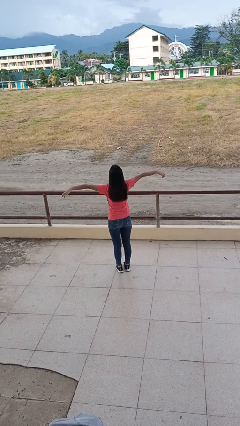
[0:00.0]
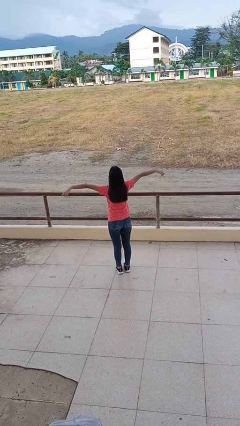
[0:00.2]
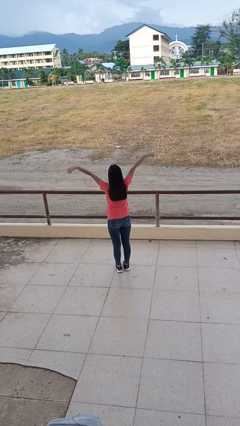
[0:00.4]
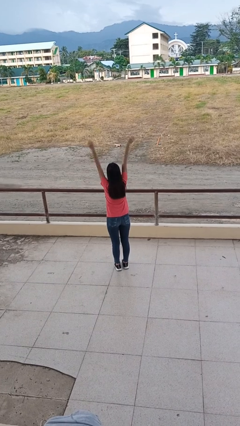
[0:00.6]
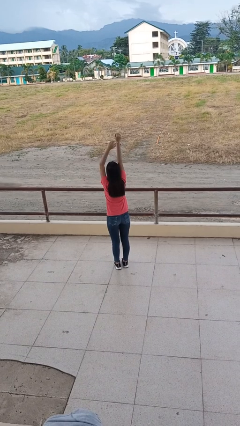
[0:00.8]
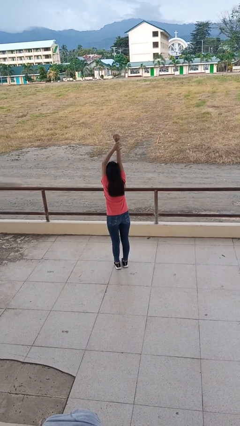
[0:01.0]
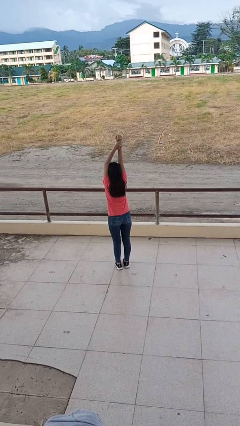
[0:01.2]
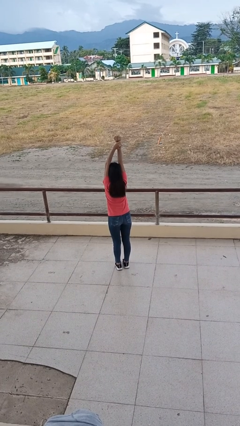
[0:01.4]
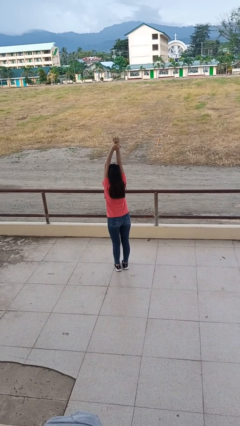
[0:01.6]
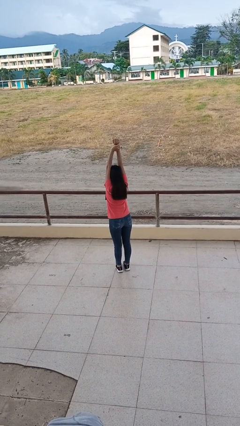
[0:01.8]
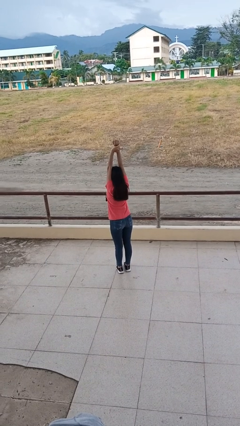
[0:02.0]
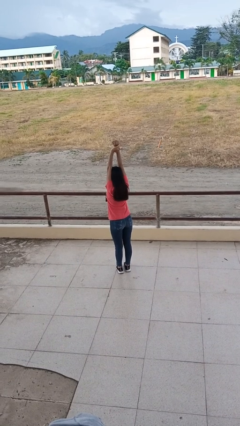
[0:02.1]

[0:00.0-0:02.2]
person stretches arms over head

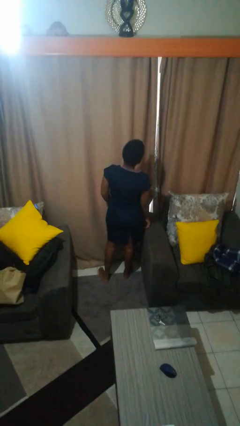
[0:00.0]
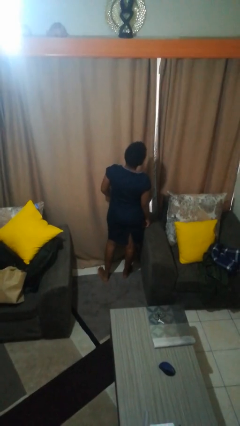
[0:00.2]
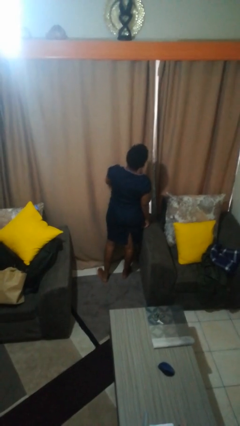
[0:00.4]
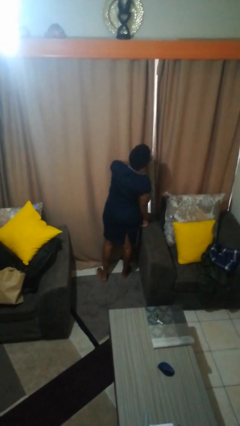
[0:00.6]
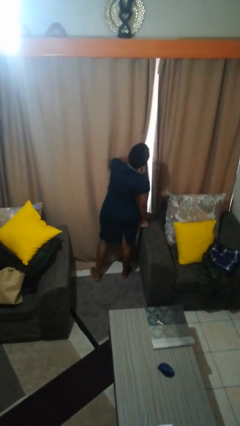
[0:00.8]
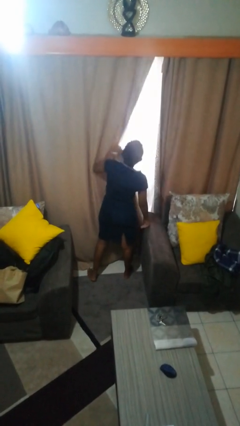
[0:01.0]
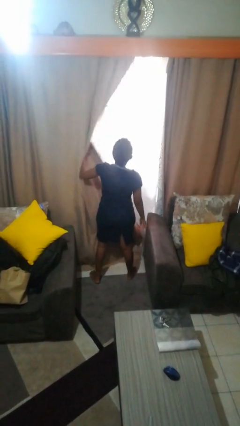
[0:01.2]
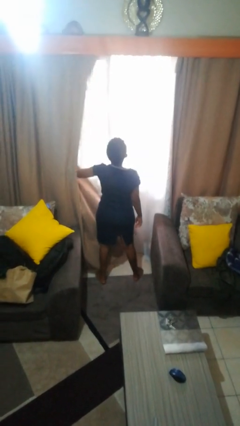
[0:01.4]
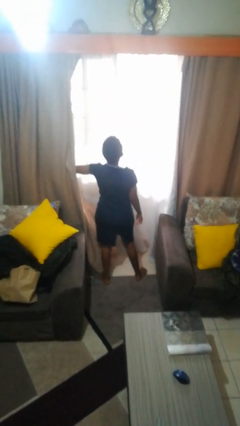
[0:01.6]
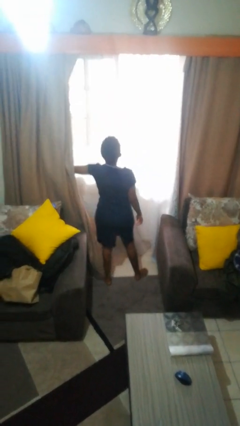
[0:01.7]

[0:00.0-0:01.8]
person opens curtains

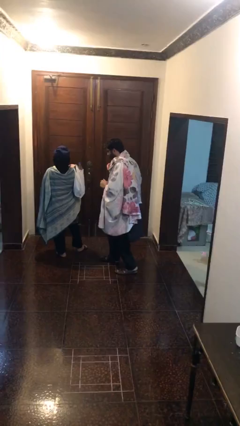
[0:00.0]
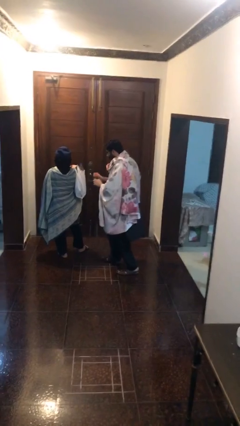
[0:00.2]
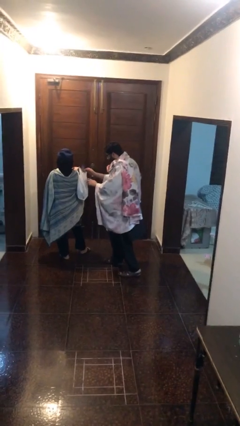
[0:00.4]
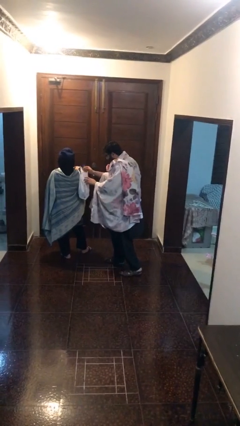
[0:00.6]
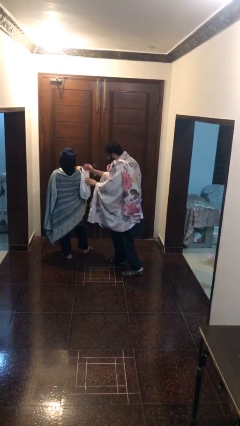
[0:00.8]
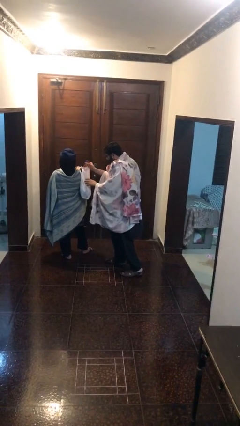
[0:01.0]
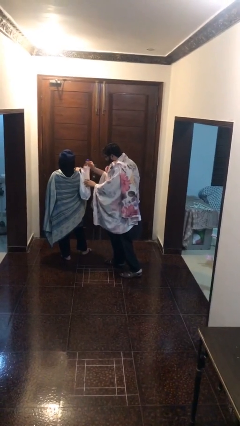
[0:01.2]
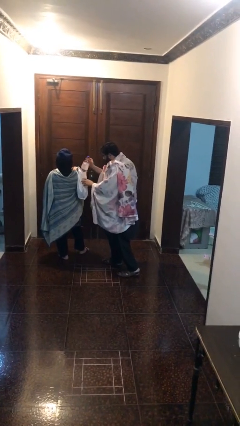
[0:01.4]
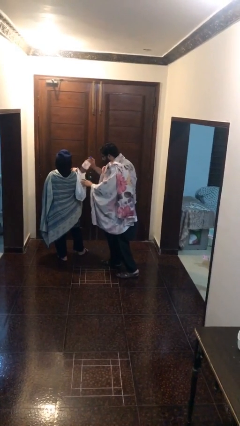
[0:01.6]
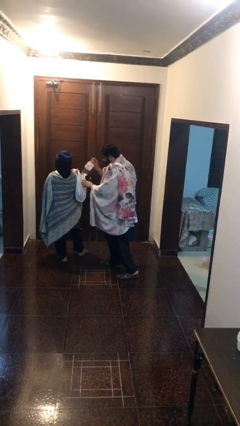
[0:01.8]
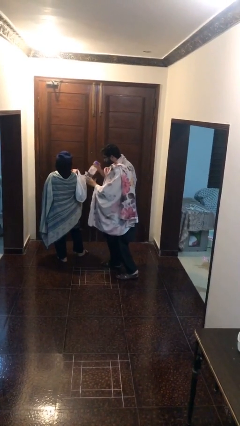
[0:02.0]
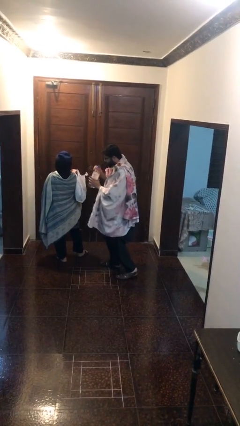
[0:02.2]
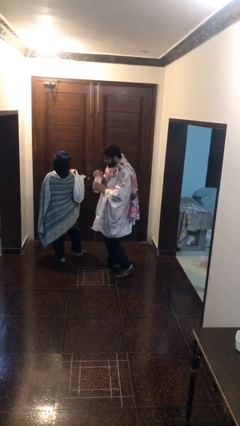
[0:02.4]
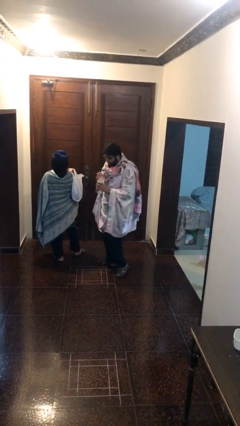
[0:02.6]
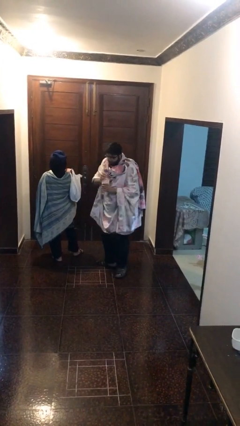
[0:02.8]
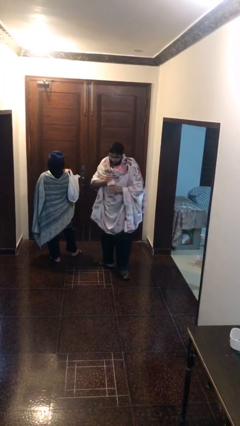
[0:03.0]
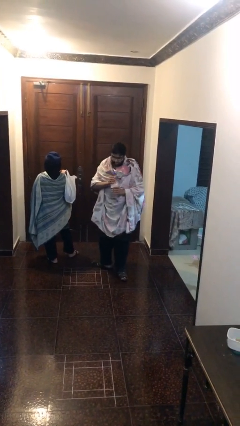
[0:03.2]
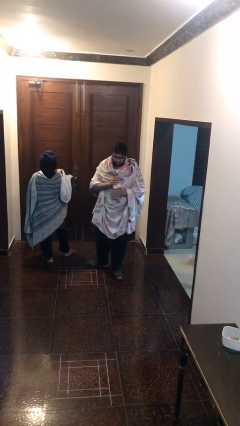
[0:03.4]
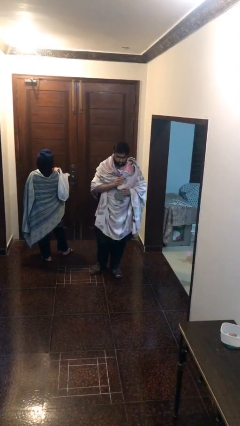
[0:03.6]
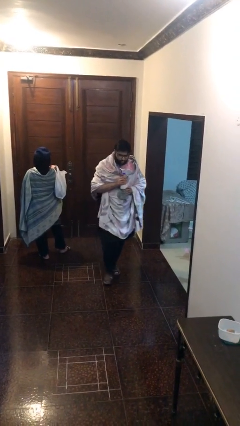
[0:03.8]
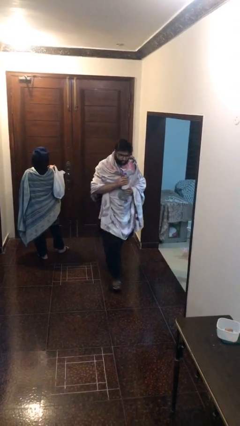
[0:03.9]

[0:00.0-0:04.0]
person steals object from person

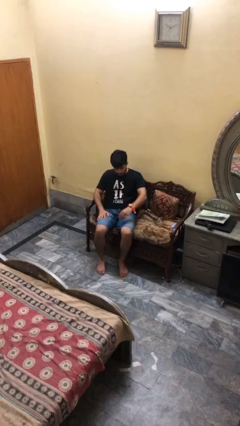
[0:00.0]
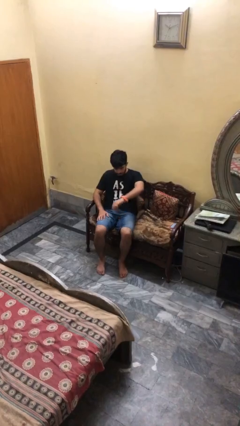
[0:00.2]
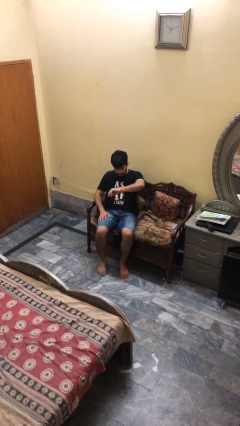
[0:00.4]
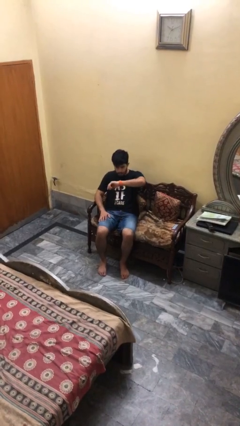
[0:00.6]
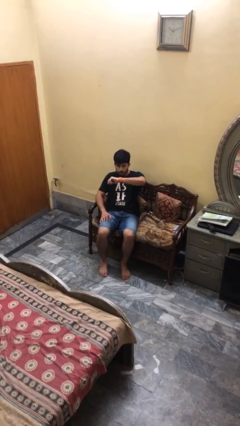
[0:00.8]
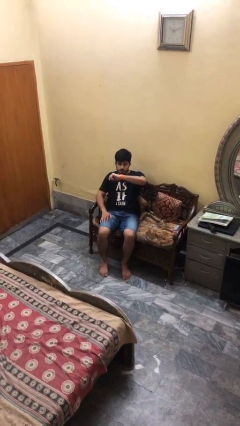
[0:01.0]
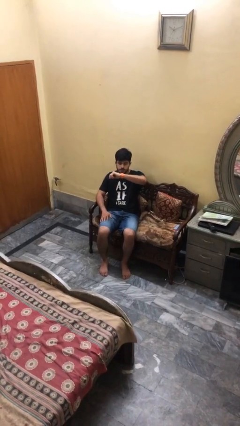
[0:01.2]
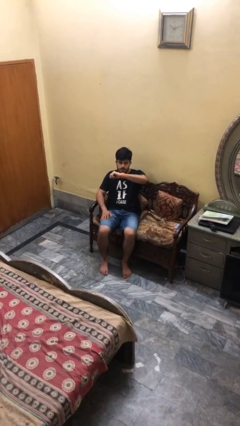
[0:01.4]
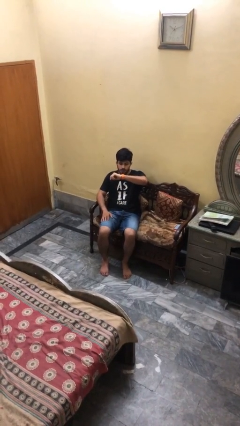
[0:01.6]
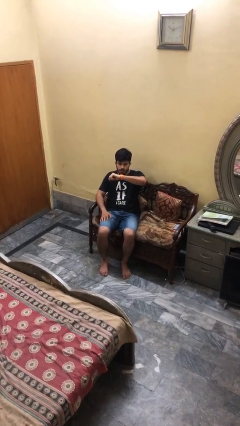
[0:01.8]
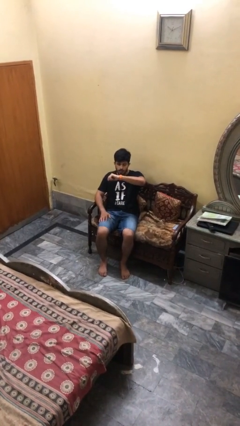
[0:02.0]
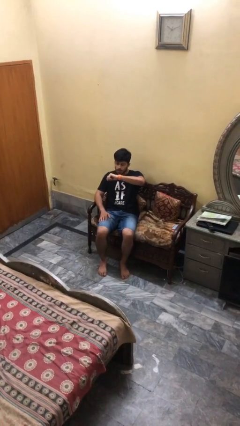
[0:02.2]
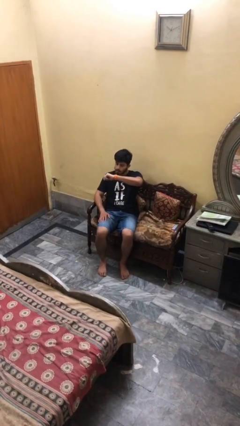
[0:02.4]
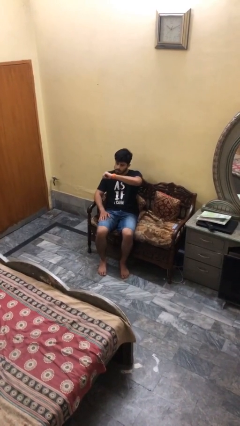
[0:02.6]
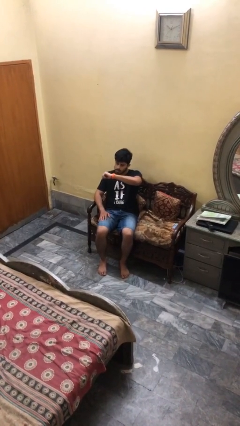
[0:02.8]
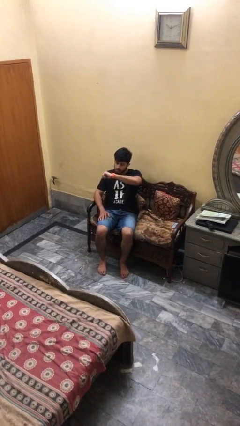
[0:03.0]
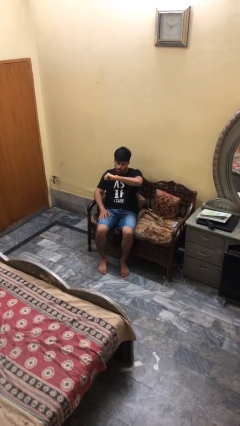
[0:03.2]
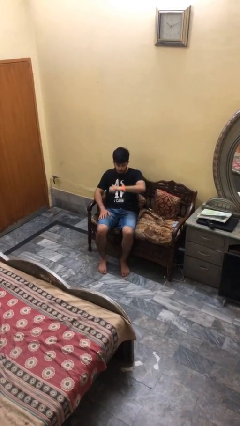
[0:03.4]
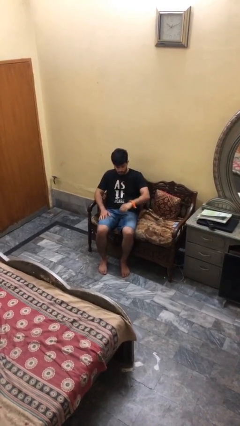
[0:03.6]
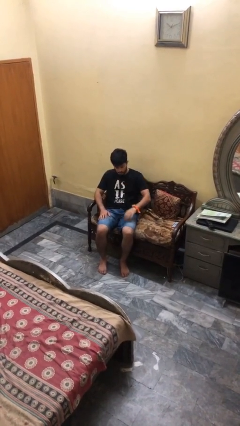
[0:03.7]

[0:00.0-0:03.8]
person looks at wristwatch

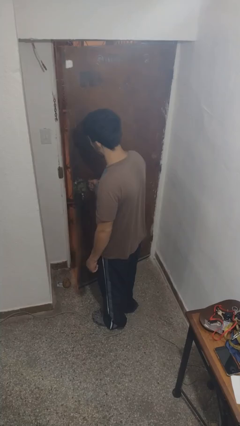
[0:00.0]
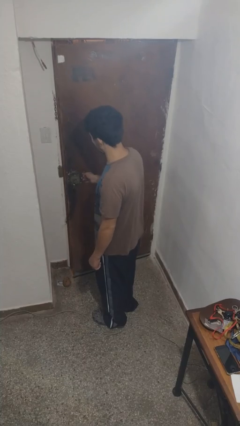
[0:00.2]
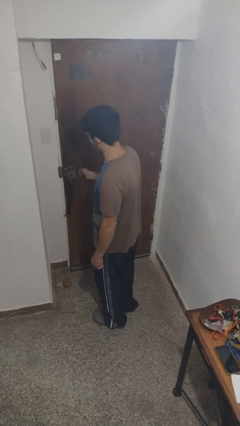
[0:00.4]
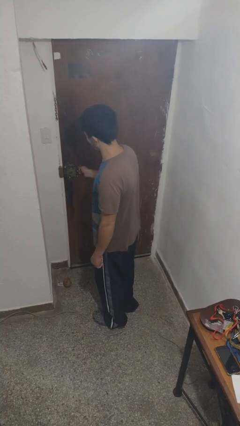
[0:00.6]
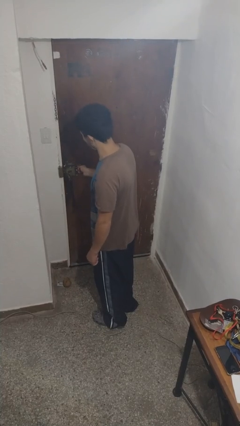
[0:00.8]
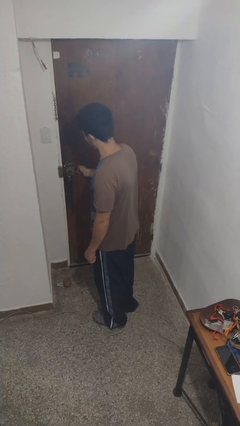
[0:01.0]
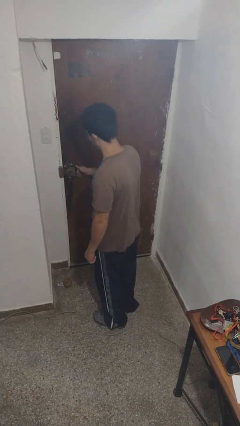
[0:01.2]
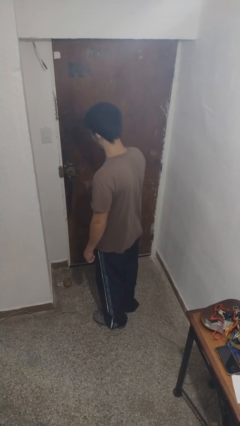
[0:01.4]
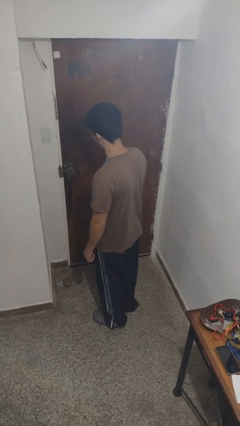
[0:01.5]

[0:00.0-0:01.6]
person closes facility door

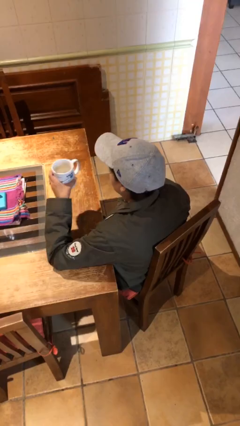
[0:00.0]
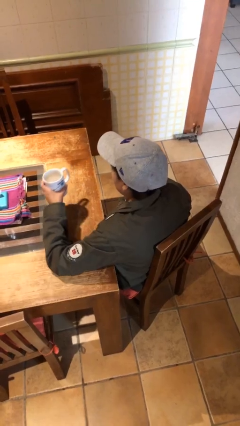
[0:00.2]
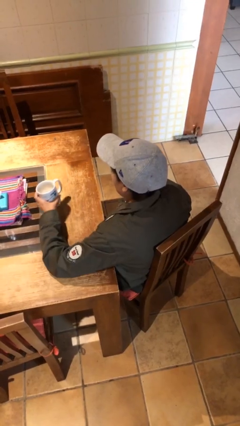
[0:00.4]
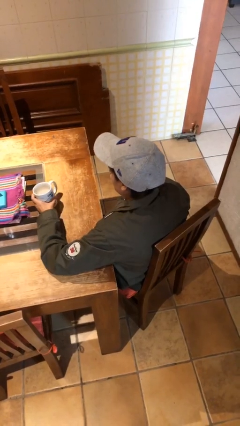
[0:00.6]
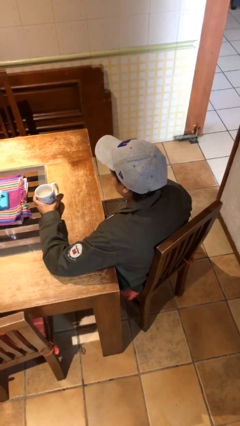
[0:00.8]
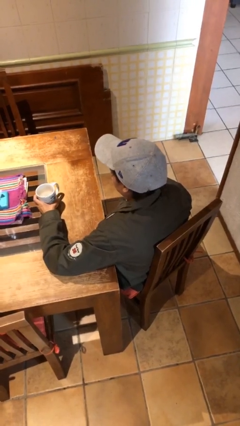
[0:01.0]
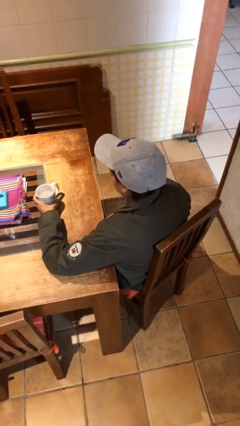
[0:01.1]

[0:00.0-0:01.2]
person puts down object on table

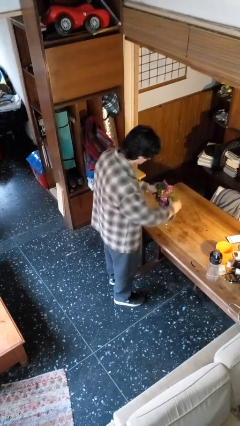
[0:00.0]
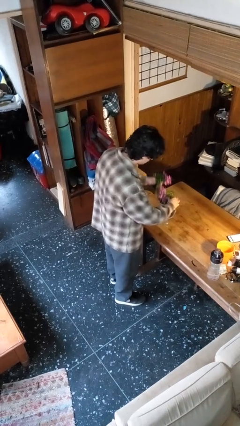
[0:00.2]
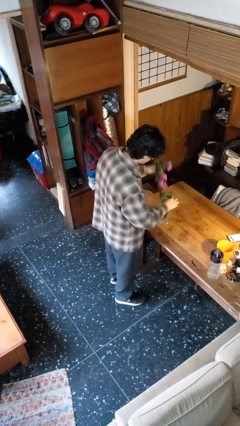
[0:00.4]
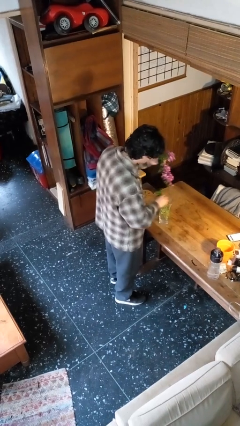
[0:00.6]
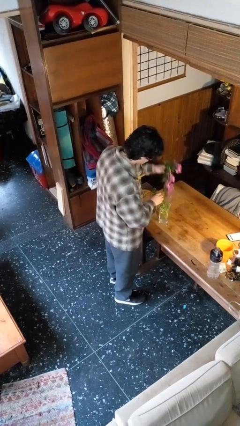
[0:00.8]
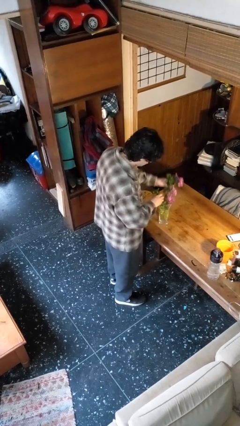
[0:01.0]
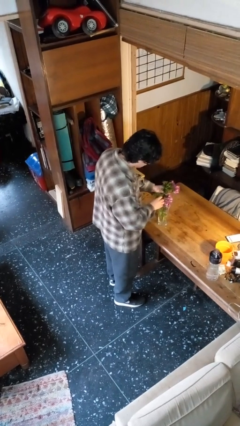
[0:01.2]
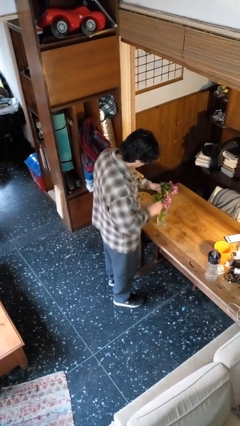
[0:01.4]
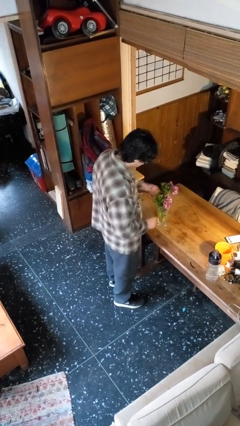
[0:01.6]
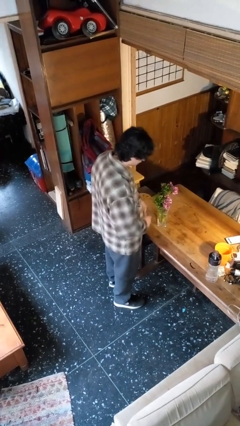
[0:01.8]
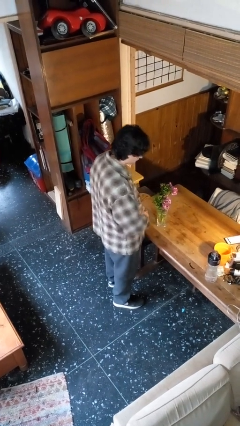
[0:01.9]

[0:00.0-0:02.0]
person arranges flowers in vase
